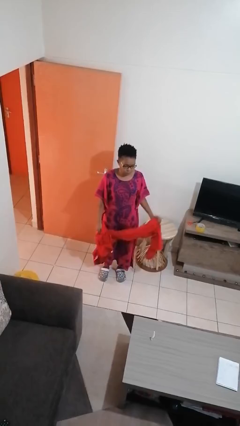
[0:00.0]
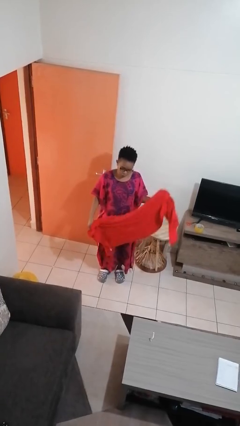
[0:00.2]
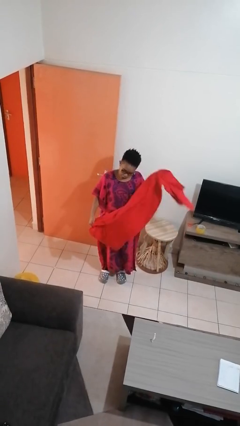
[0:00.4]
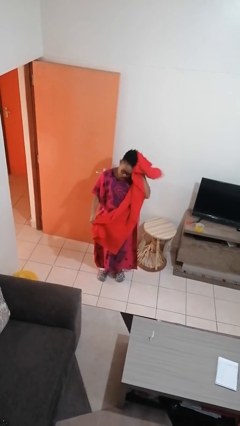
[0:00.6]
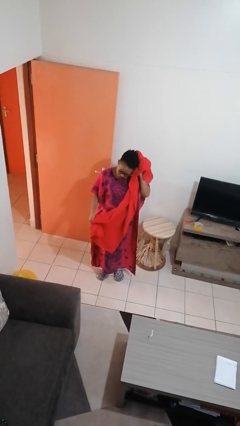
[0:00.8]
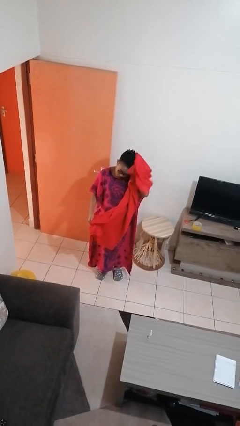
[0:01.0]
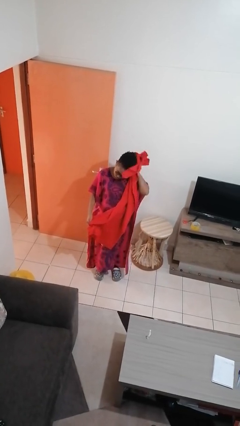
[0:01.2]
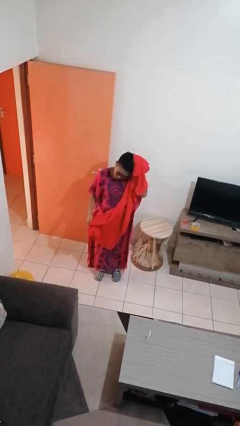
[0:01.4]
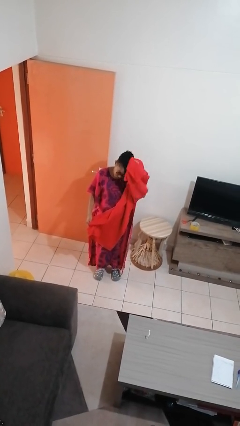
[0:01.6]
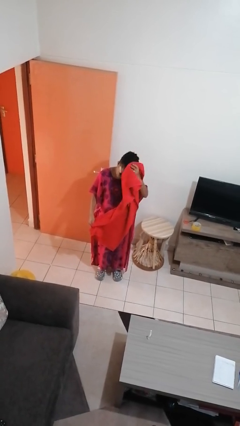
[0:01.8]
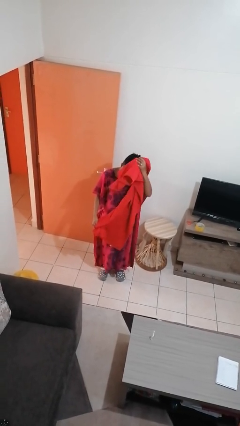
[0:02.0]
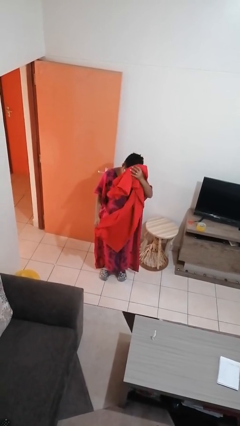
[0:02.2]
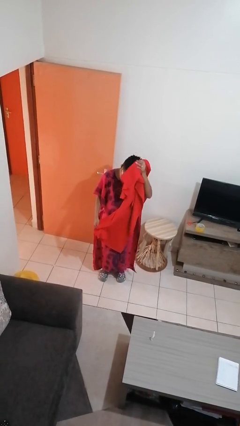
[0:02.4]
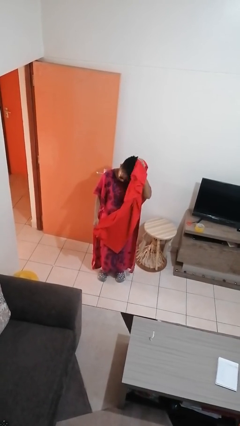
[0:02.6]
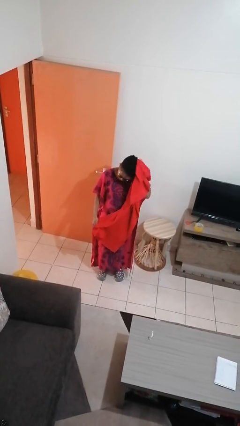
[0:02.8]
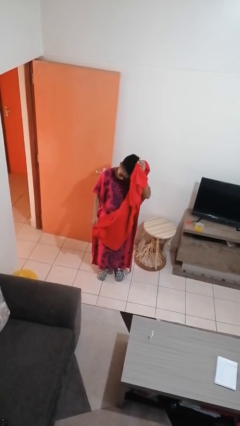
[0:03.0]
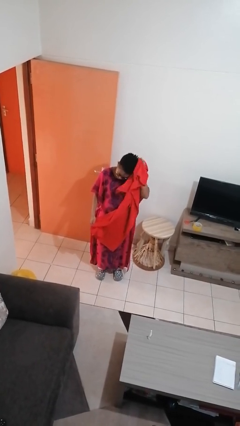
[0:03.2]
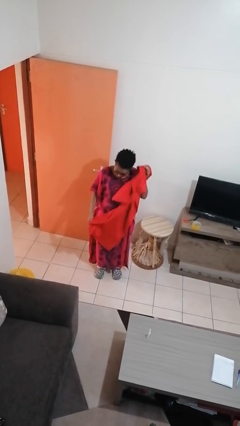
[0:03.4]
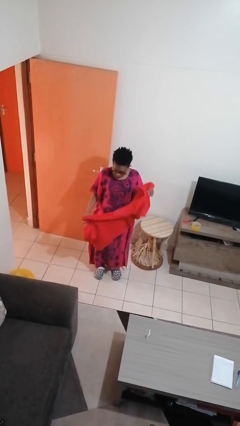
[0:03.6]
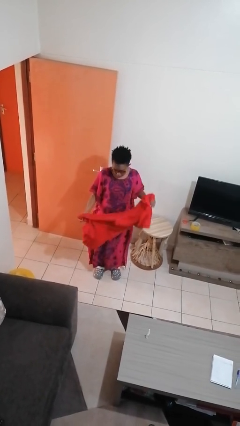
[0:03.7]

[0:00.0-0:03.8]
person dries hair with towel

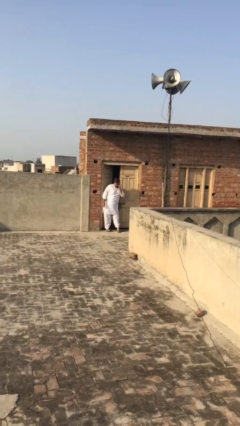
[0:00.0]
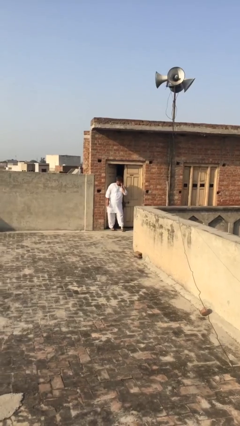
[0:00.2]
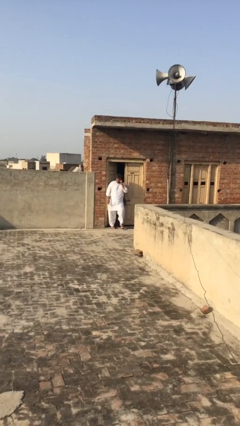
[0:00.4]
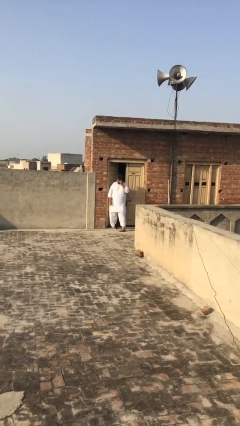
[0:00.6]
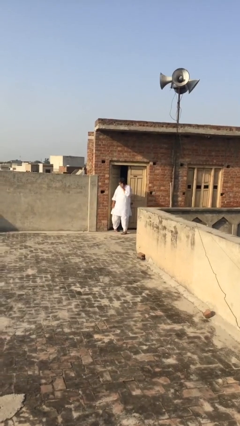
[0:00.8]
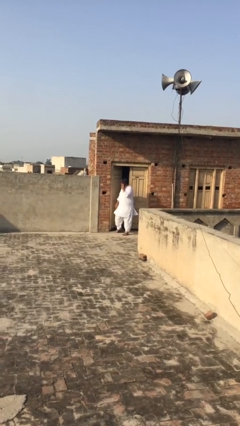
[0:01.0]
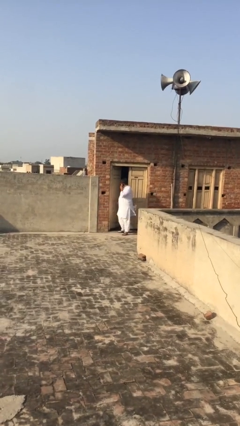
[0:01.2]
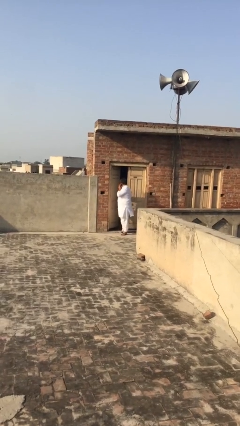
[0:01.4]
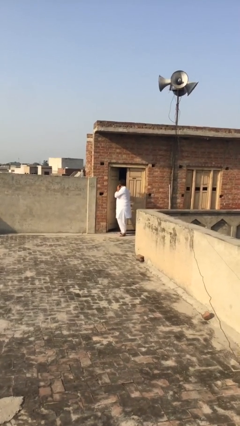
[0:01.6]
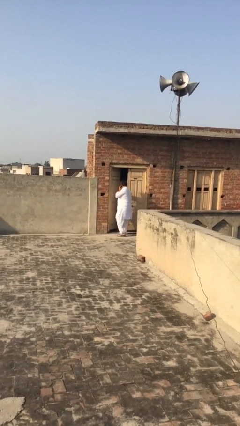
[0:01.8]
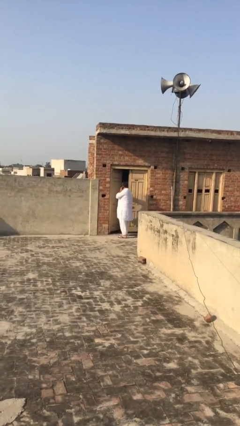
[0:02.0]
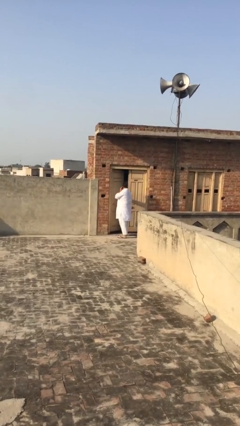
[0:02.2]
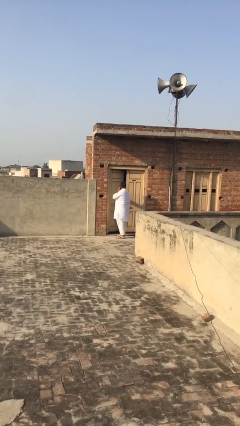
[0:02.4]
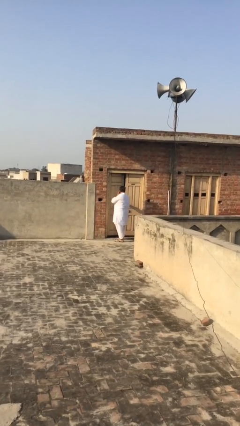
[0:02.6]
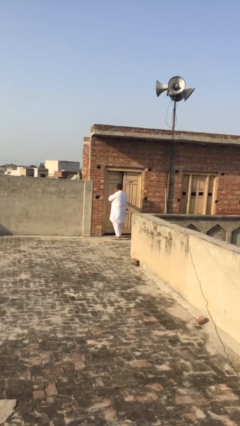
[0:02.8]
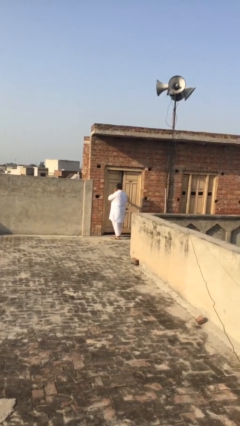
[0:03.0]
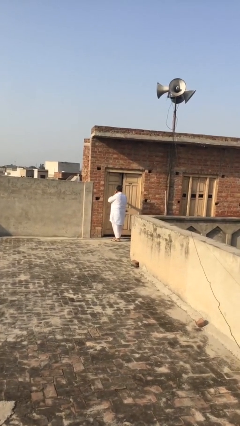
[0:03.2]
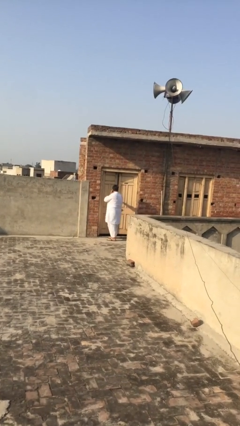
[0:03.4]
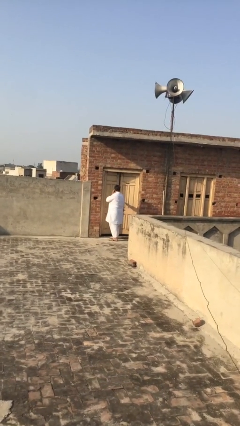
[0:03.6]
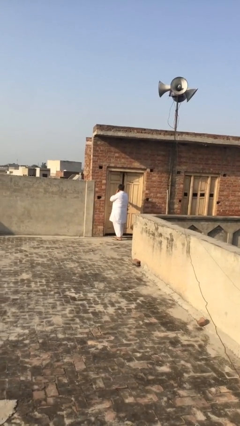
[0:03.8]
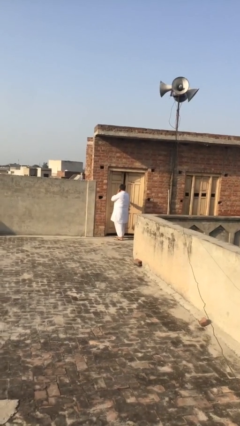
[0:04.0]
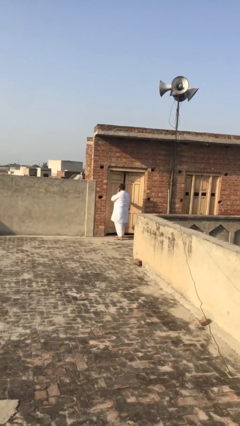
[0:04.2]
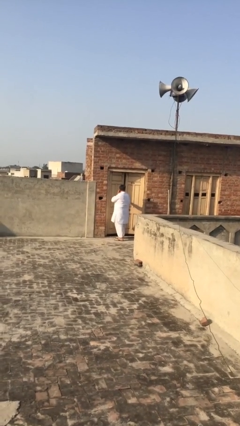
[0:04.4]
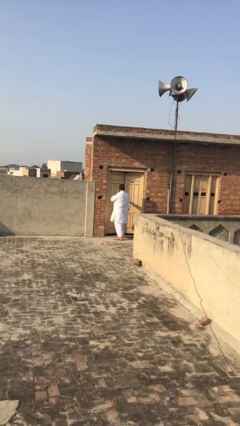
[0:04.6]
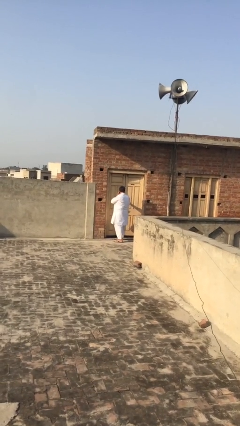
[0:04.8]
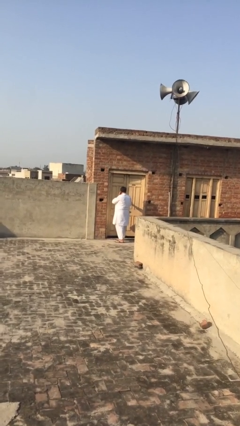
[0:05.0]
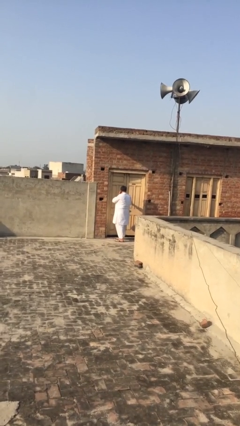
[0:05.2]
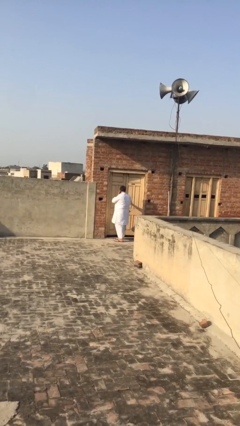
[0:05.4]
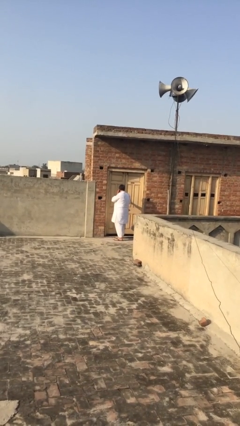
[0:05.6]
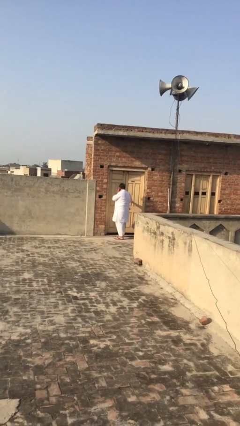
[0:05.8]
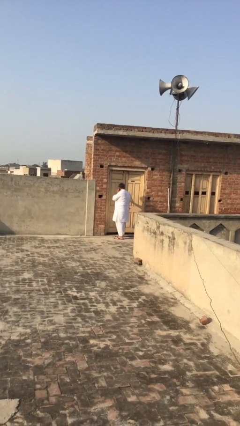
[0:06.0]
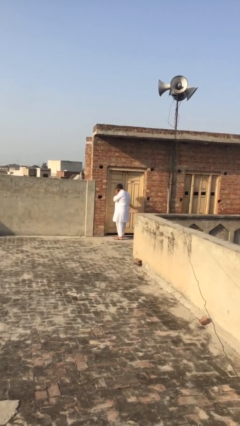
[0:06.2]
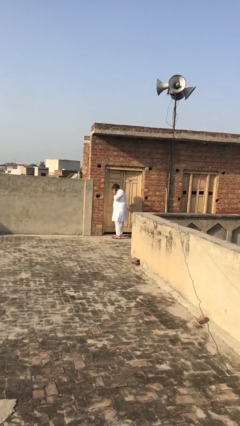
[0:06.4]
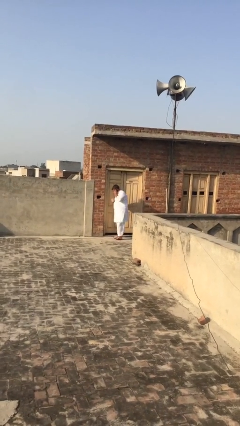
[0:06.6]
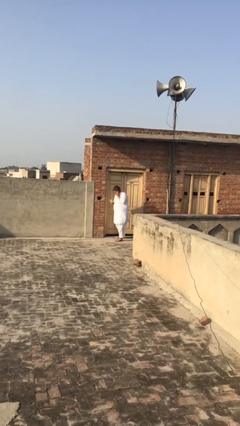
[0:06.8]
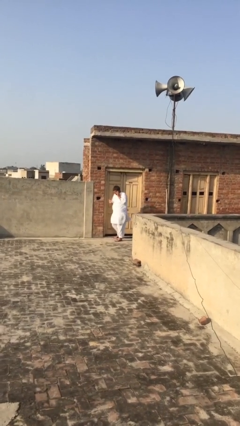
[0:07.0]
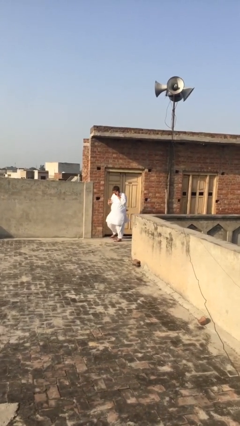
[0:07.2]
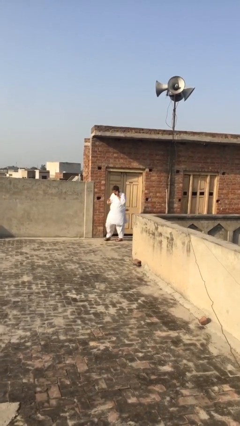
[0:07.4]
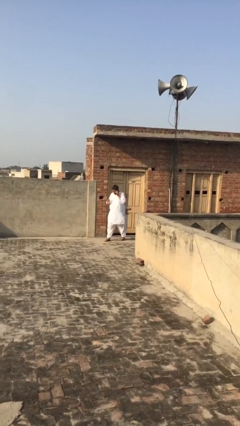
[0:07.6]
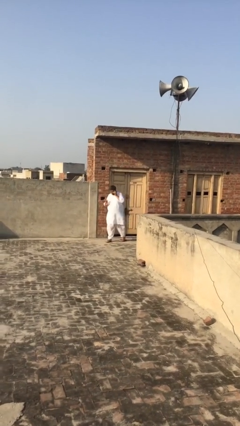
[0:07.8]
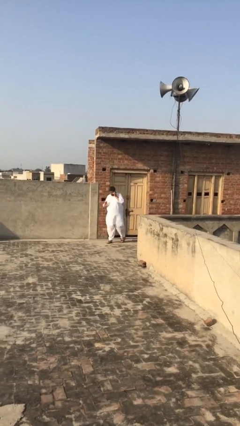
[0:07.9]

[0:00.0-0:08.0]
person closes facility door

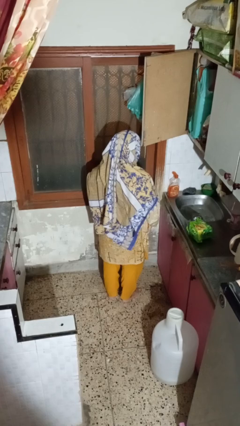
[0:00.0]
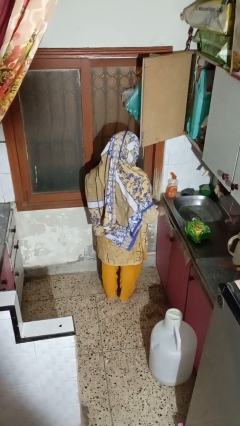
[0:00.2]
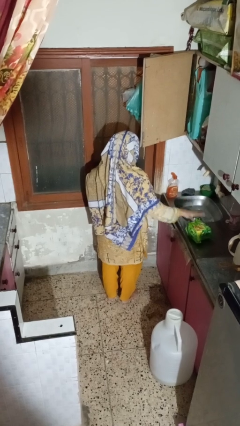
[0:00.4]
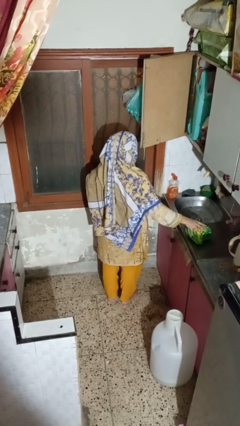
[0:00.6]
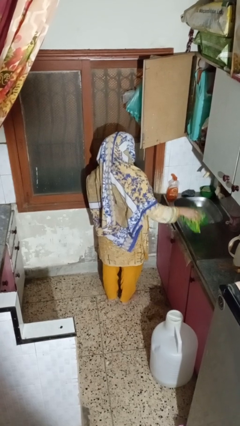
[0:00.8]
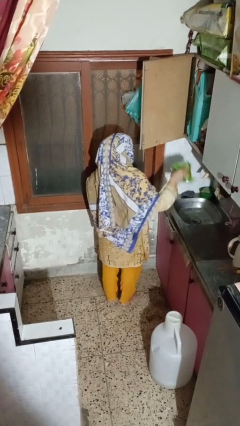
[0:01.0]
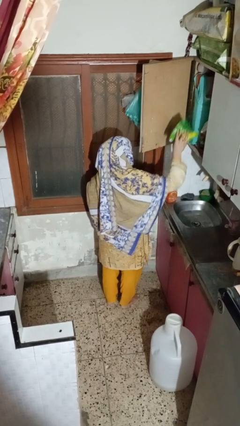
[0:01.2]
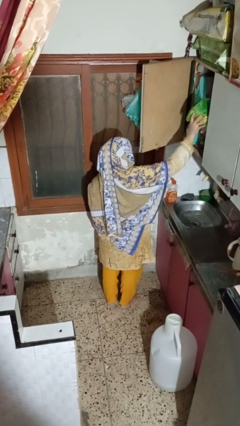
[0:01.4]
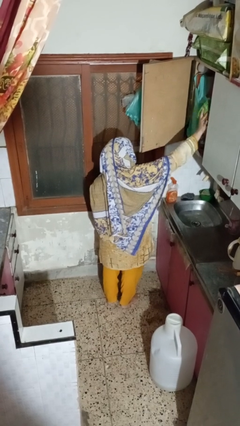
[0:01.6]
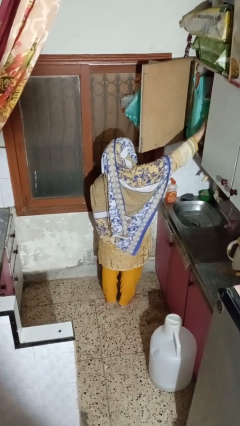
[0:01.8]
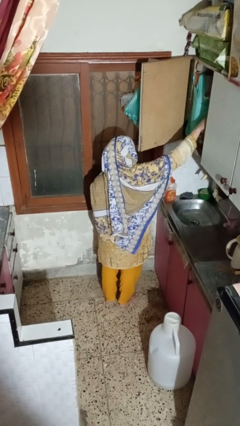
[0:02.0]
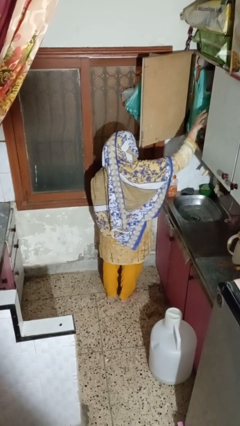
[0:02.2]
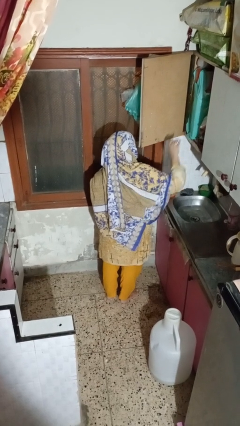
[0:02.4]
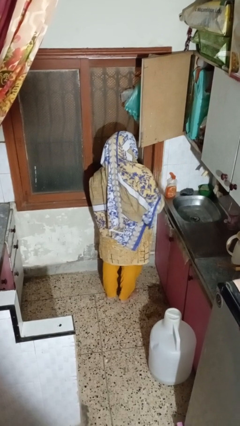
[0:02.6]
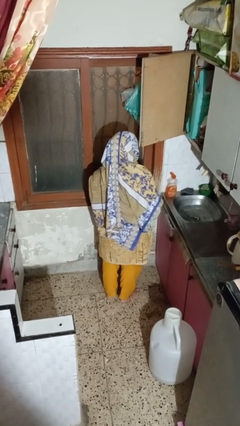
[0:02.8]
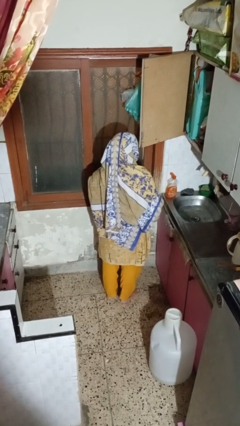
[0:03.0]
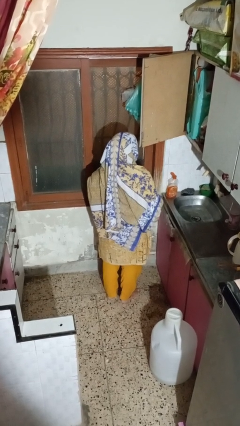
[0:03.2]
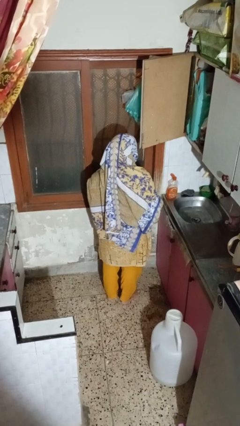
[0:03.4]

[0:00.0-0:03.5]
person puts object in cabinet

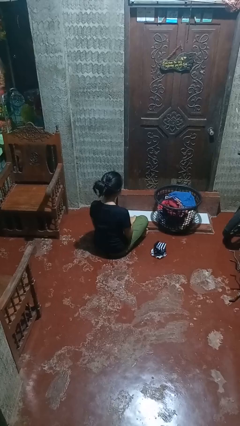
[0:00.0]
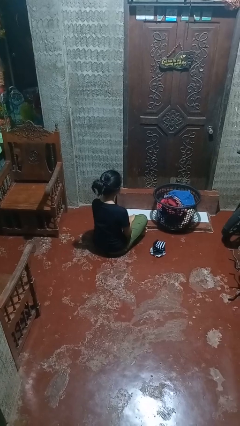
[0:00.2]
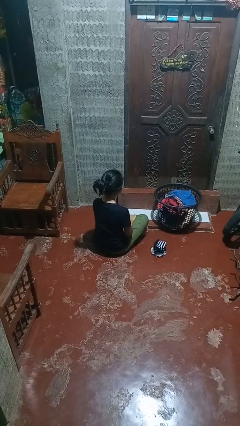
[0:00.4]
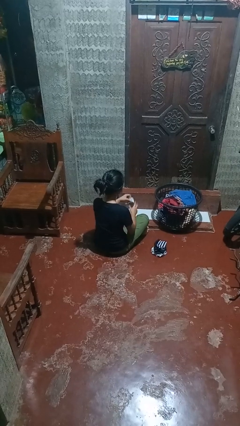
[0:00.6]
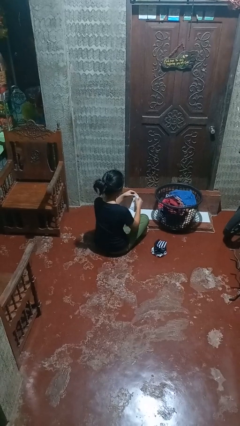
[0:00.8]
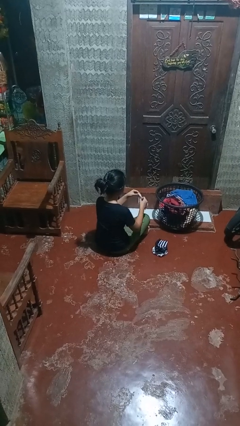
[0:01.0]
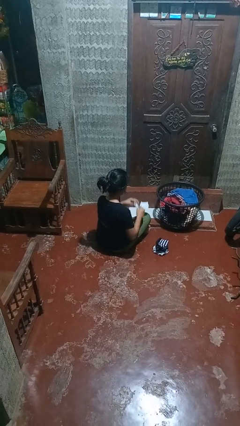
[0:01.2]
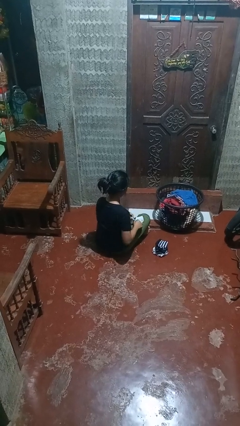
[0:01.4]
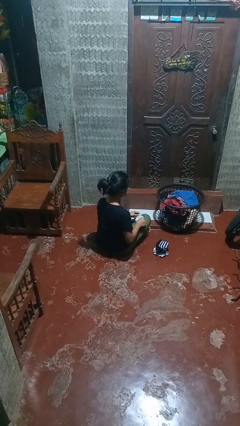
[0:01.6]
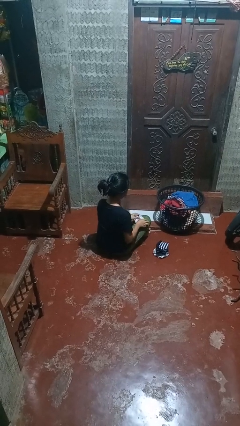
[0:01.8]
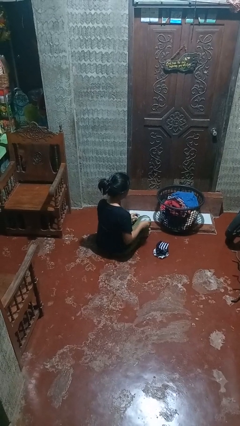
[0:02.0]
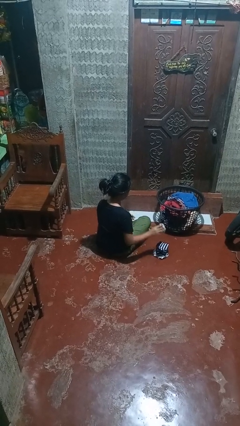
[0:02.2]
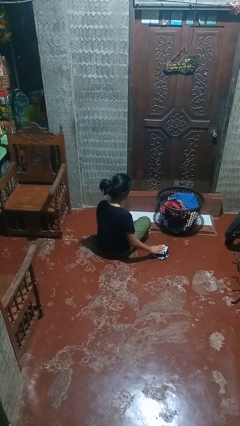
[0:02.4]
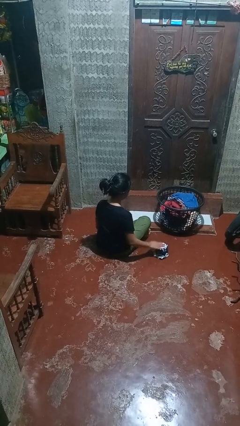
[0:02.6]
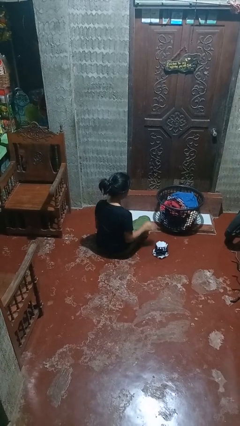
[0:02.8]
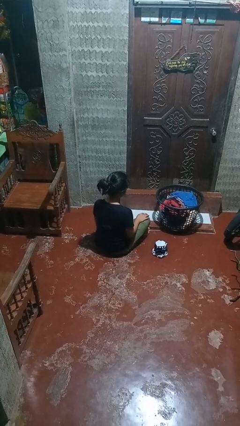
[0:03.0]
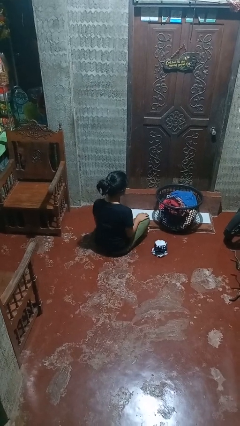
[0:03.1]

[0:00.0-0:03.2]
person folds socks
